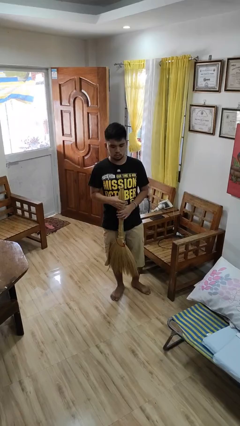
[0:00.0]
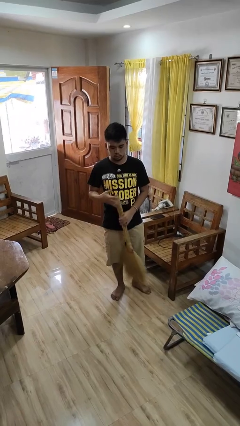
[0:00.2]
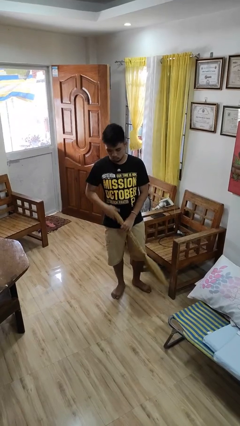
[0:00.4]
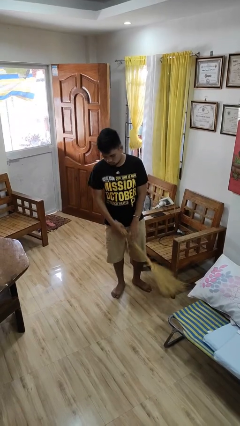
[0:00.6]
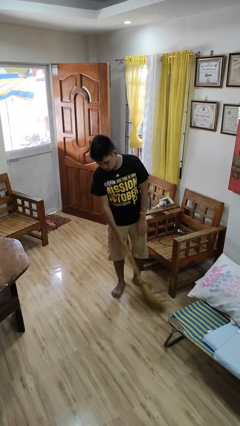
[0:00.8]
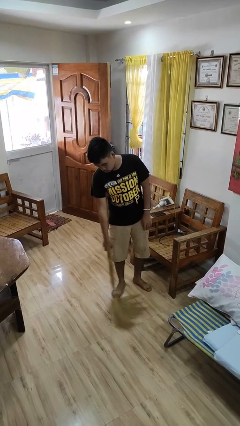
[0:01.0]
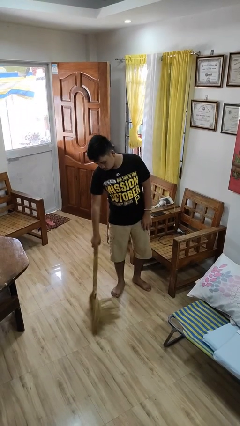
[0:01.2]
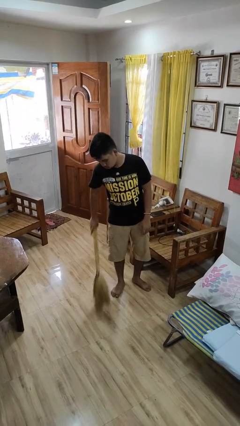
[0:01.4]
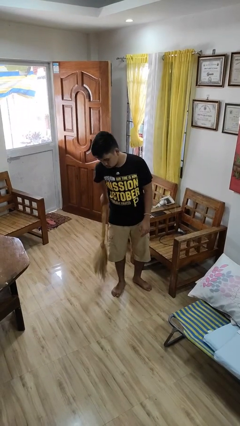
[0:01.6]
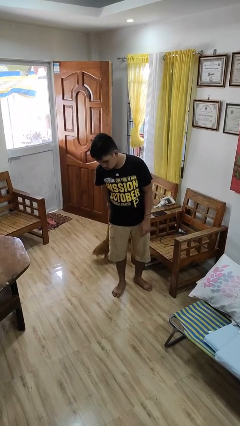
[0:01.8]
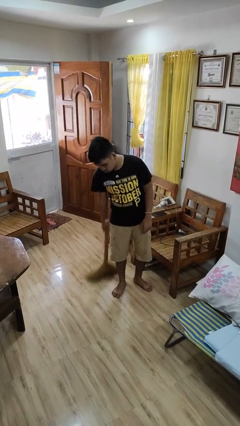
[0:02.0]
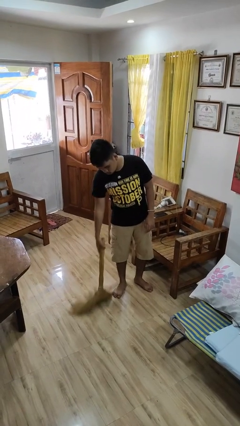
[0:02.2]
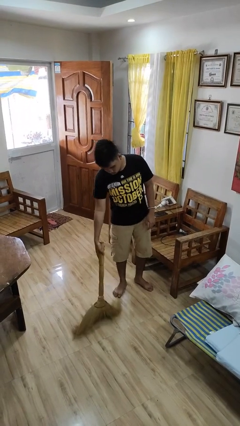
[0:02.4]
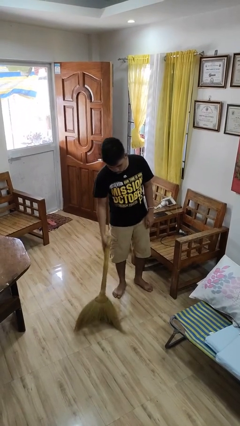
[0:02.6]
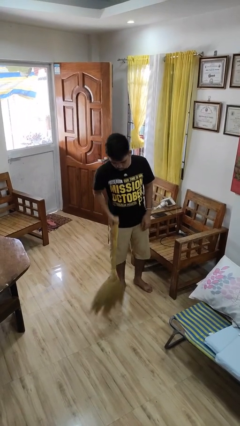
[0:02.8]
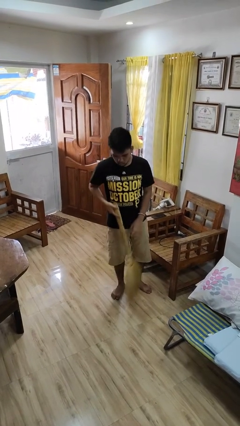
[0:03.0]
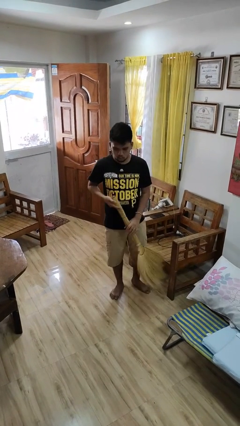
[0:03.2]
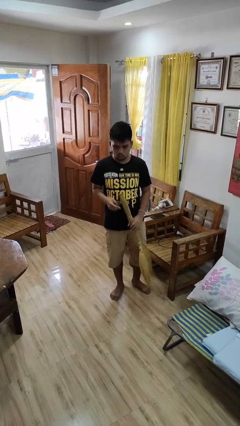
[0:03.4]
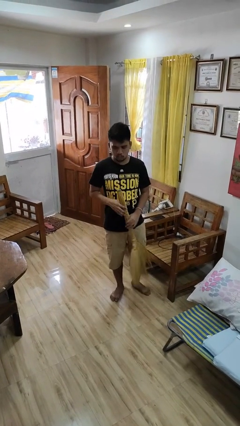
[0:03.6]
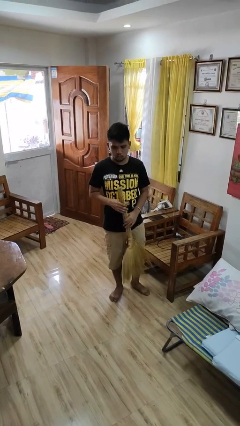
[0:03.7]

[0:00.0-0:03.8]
person sweeps floor

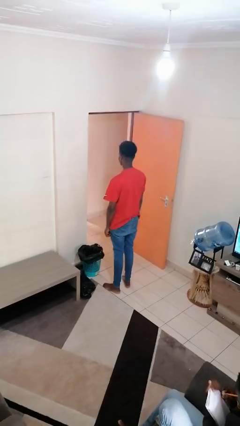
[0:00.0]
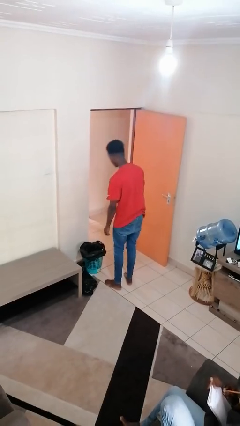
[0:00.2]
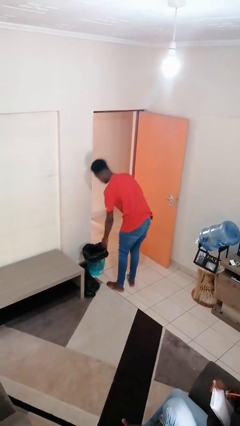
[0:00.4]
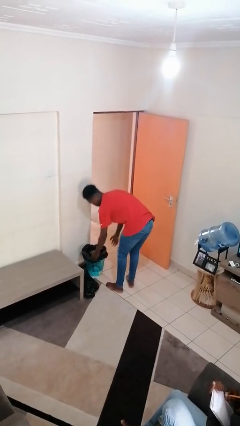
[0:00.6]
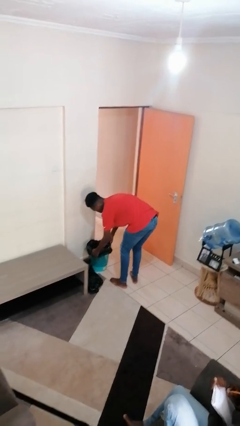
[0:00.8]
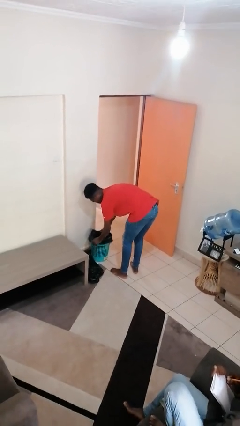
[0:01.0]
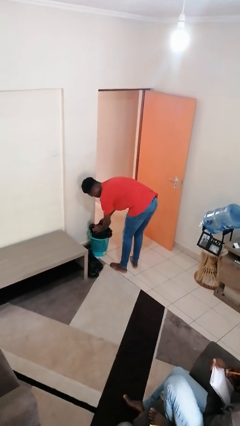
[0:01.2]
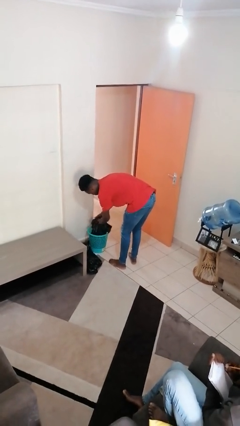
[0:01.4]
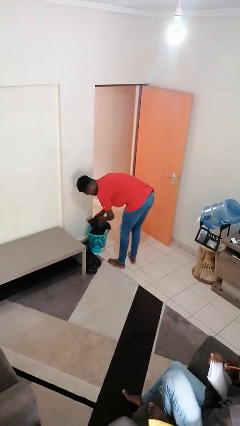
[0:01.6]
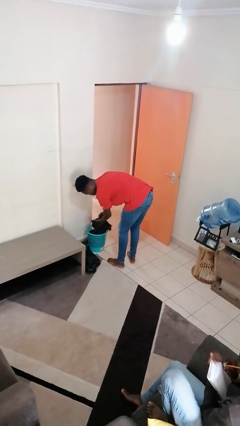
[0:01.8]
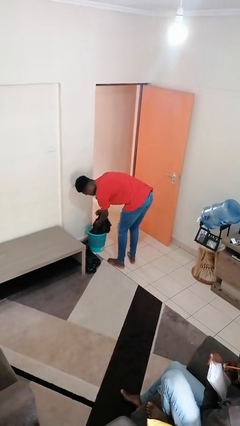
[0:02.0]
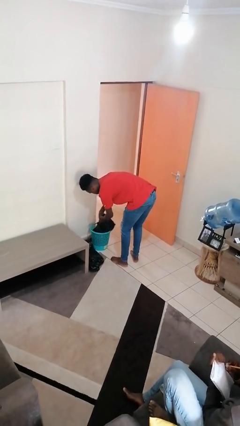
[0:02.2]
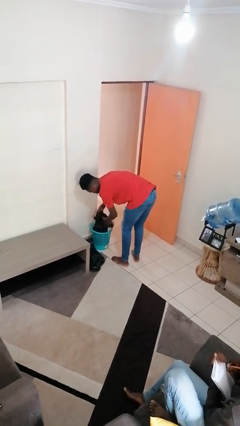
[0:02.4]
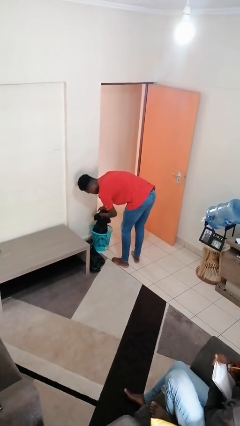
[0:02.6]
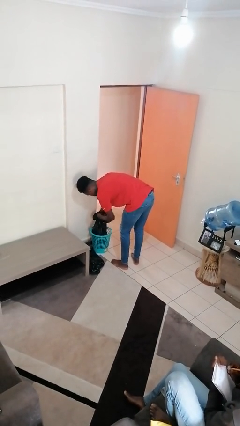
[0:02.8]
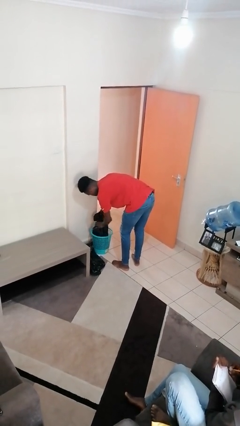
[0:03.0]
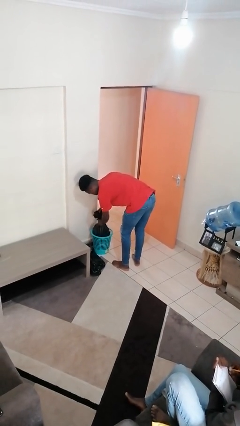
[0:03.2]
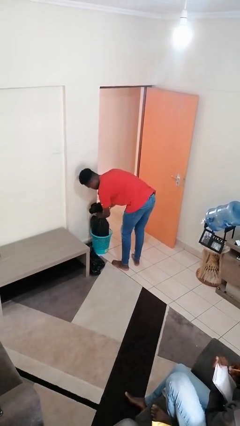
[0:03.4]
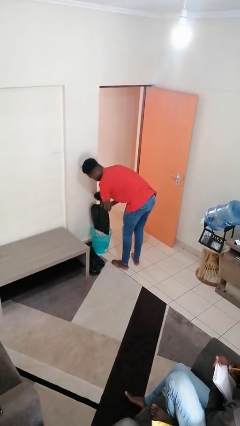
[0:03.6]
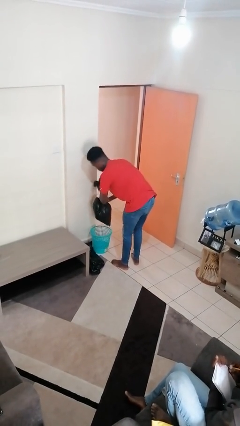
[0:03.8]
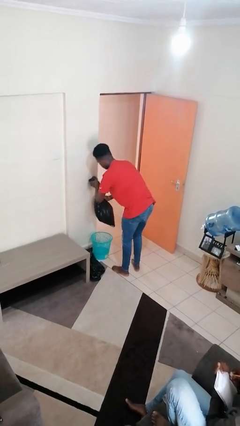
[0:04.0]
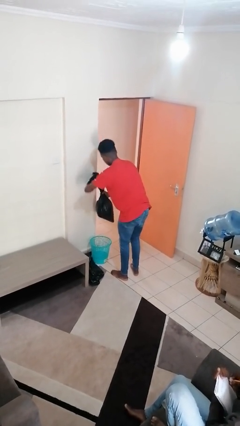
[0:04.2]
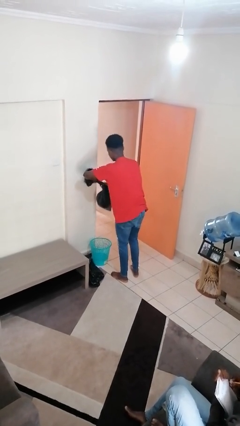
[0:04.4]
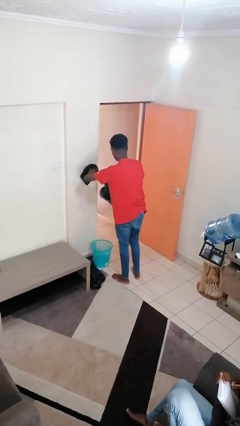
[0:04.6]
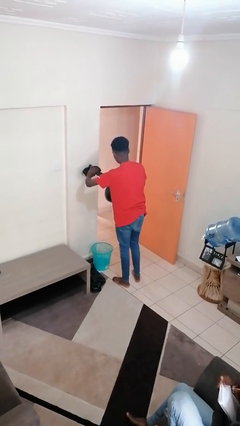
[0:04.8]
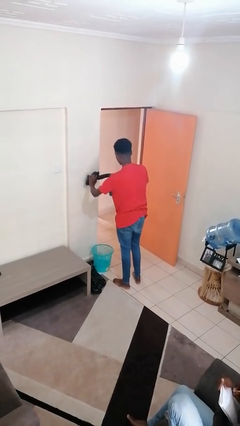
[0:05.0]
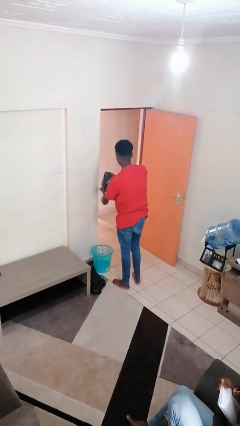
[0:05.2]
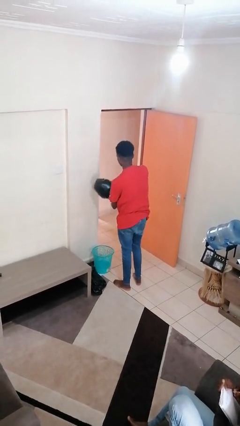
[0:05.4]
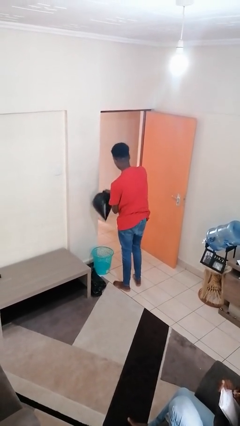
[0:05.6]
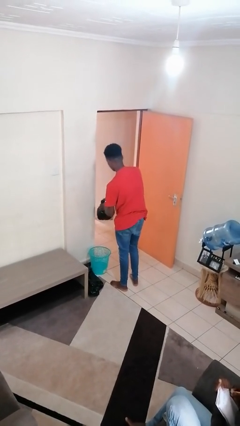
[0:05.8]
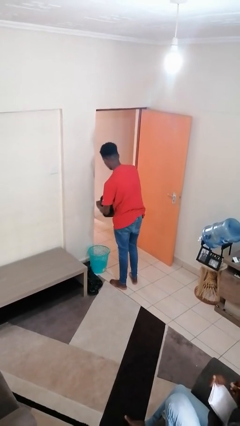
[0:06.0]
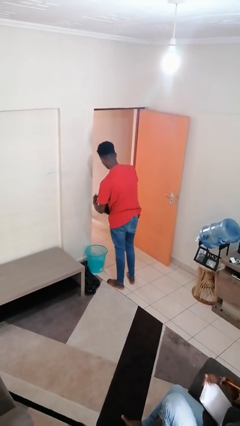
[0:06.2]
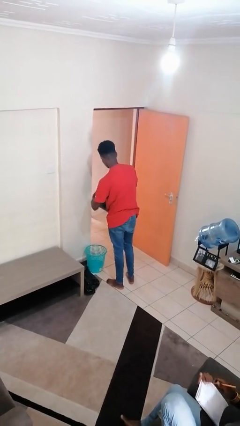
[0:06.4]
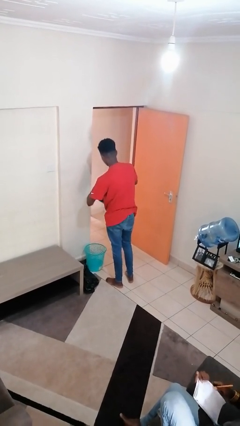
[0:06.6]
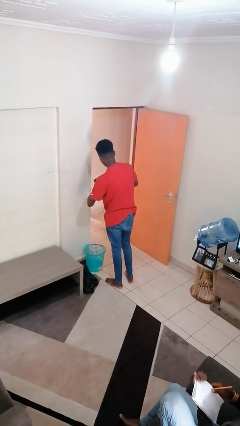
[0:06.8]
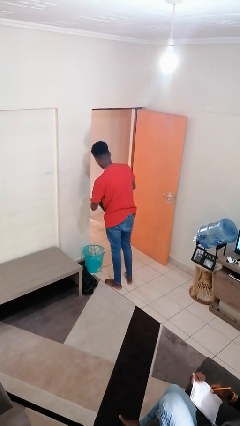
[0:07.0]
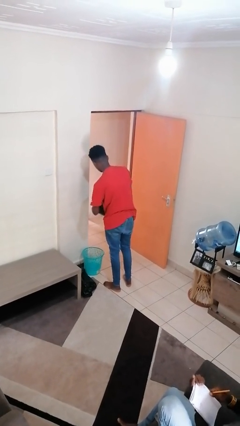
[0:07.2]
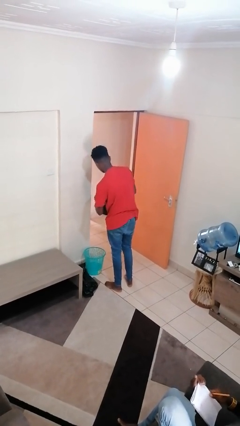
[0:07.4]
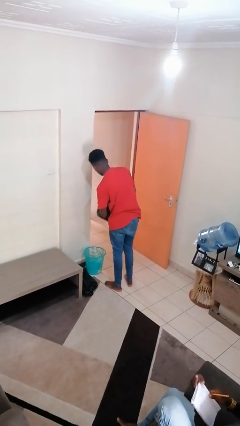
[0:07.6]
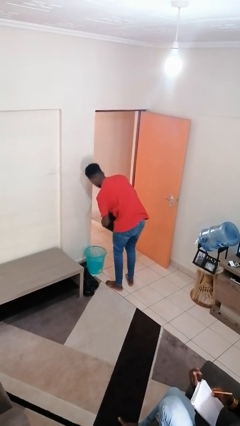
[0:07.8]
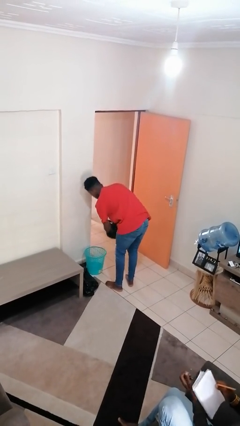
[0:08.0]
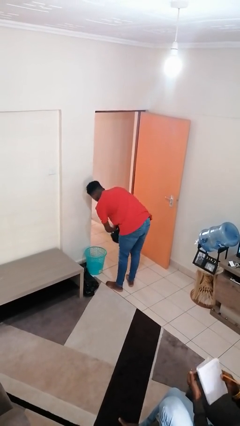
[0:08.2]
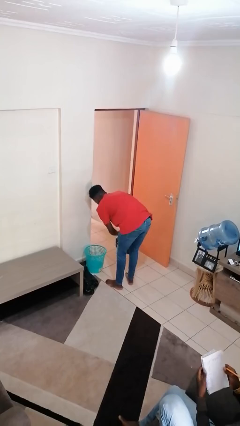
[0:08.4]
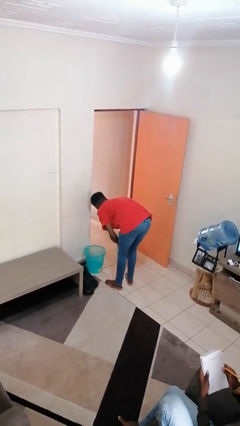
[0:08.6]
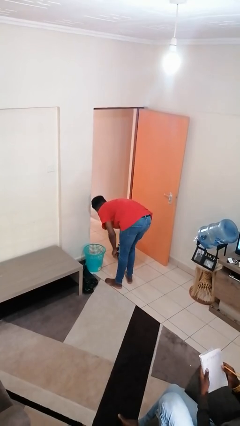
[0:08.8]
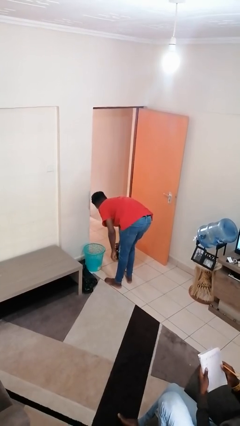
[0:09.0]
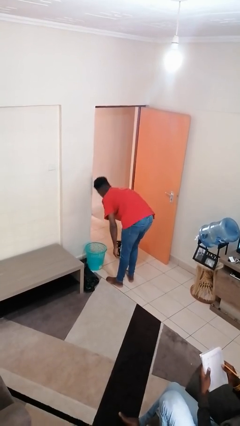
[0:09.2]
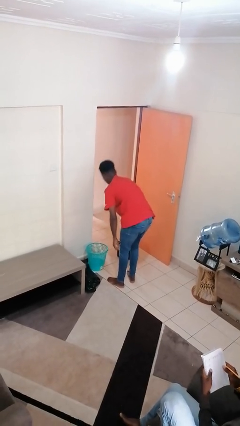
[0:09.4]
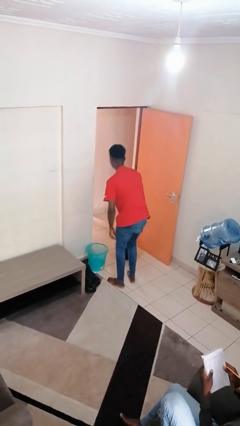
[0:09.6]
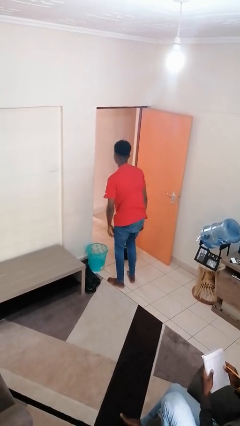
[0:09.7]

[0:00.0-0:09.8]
person removes trashbag from trashcan

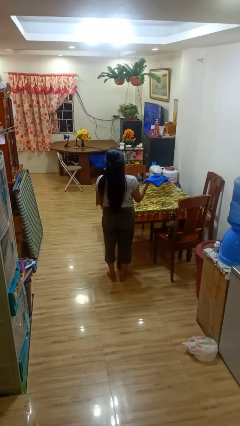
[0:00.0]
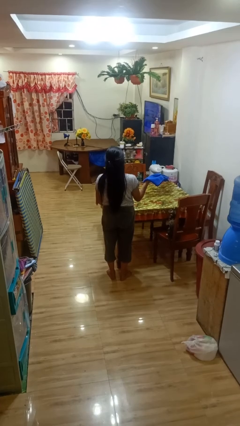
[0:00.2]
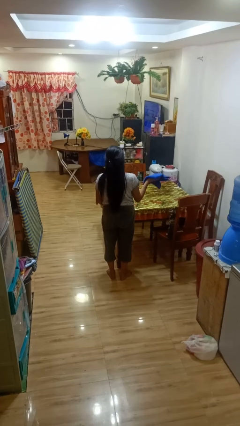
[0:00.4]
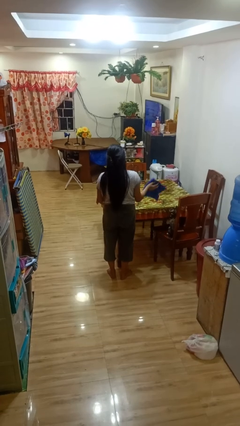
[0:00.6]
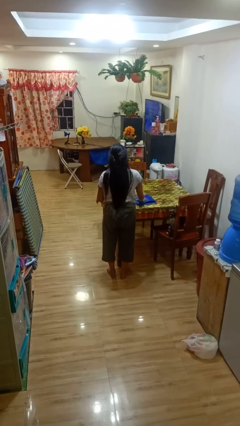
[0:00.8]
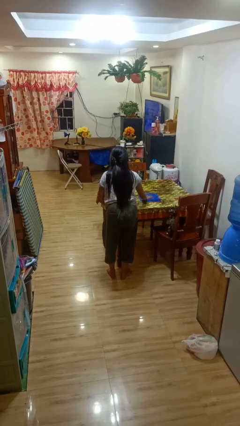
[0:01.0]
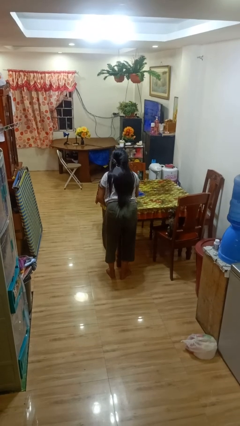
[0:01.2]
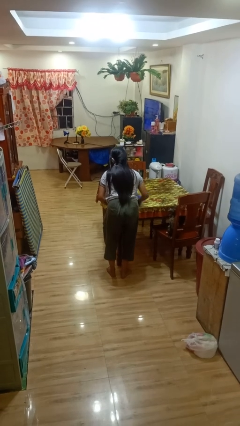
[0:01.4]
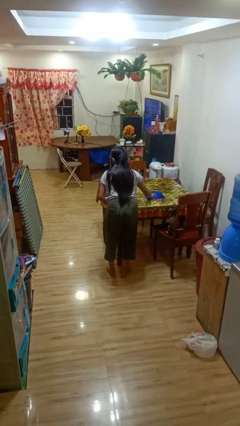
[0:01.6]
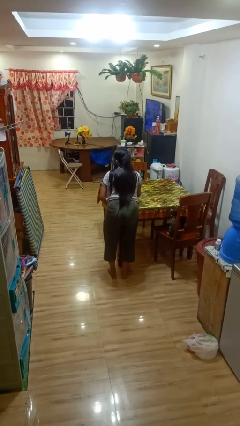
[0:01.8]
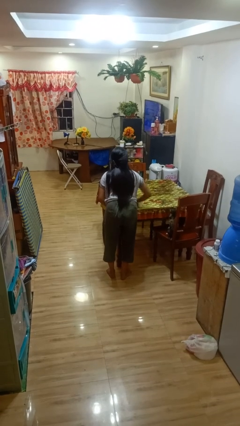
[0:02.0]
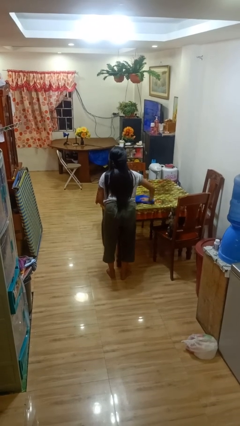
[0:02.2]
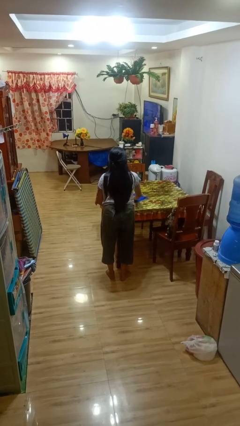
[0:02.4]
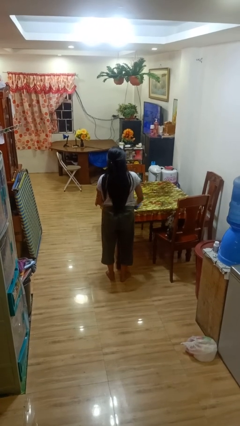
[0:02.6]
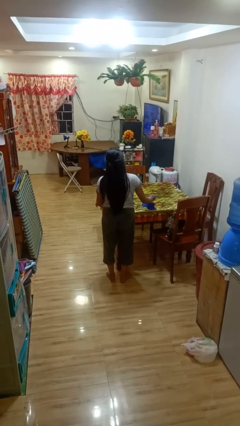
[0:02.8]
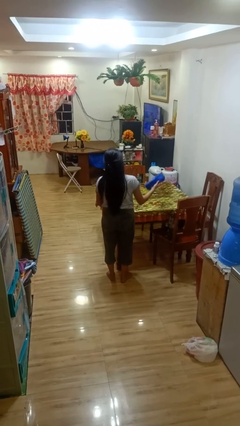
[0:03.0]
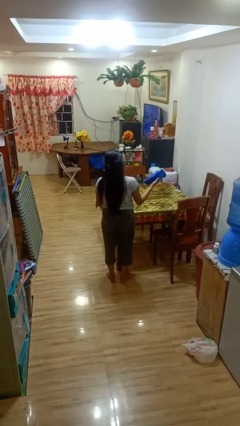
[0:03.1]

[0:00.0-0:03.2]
person cleans table with rag

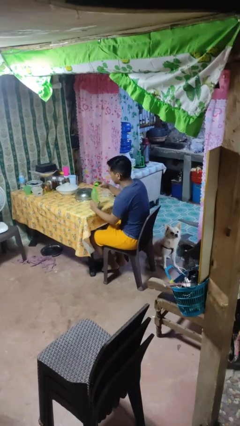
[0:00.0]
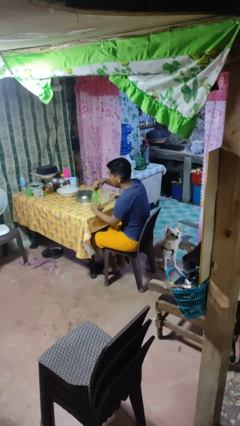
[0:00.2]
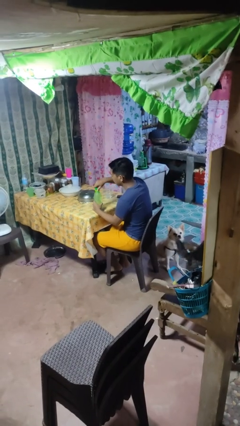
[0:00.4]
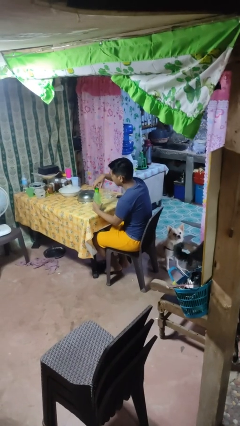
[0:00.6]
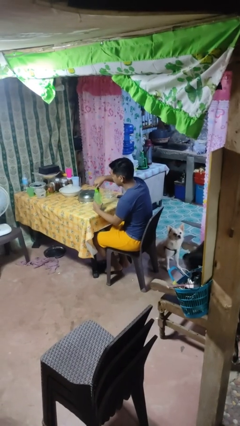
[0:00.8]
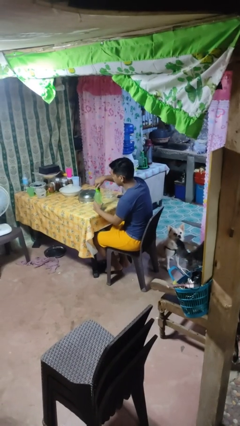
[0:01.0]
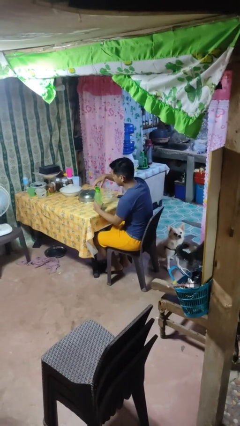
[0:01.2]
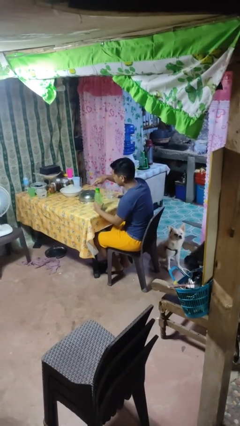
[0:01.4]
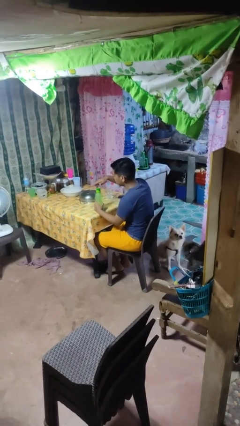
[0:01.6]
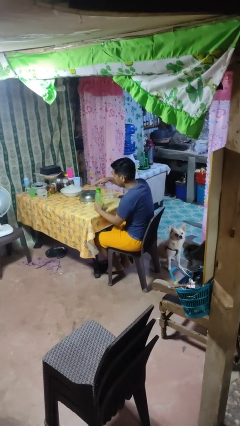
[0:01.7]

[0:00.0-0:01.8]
person screws lid to bottle
